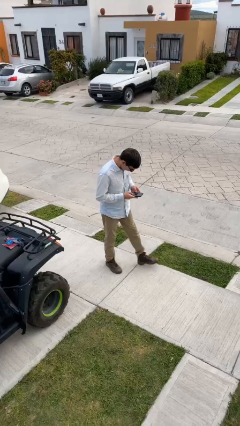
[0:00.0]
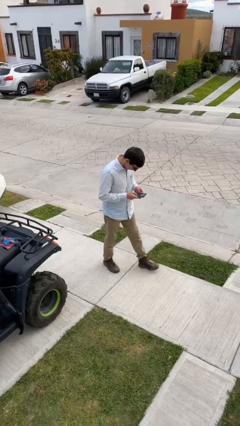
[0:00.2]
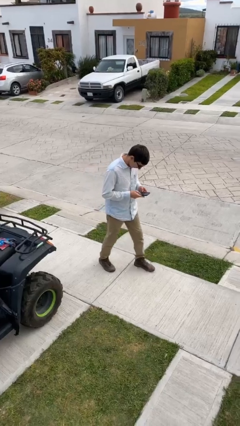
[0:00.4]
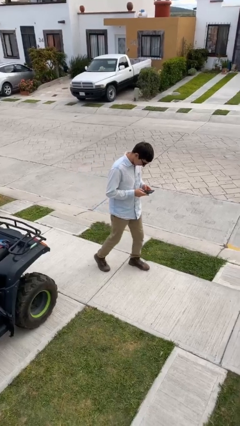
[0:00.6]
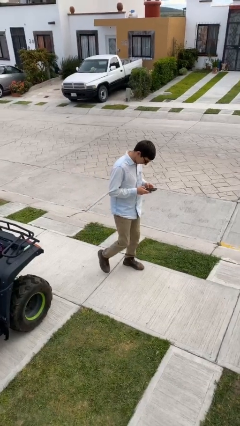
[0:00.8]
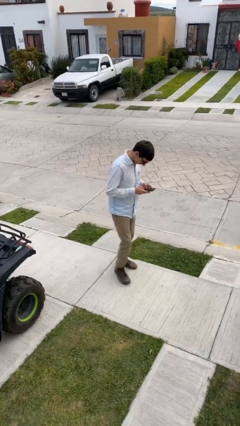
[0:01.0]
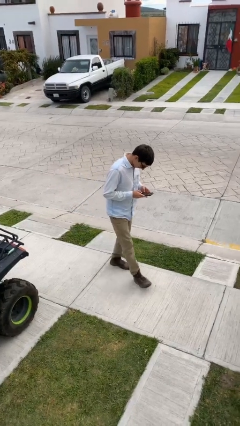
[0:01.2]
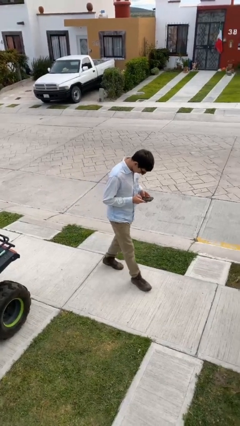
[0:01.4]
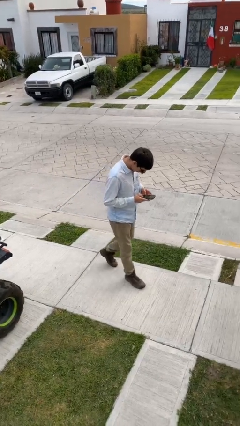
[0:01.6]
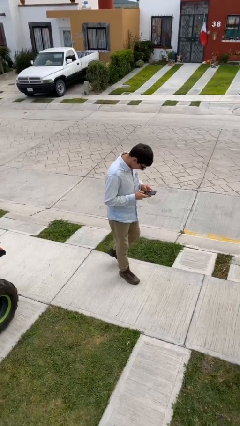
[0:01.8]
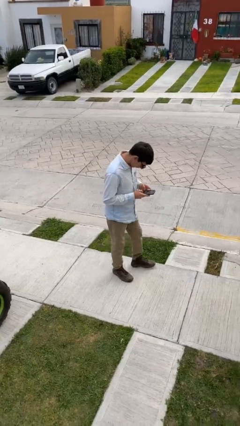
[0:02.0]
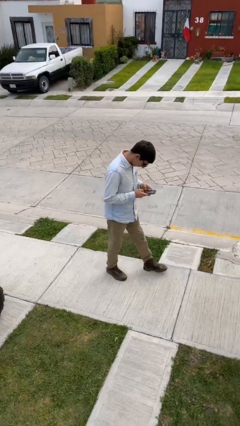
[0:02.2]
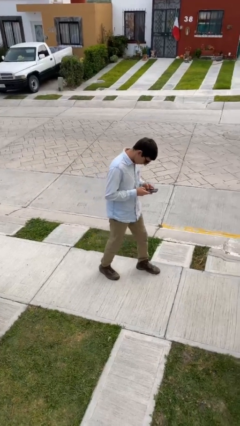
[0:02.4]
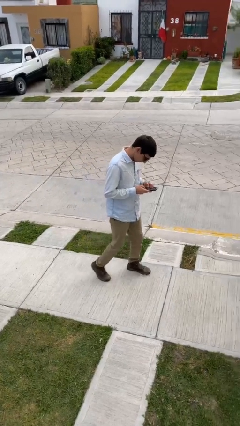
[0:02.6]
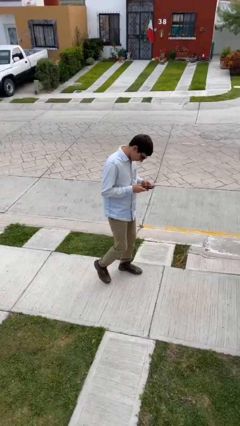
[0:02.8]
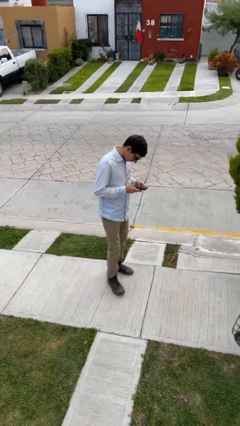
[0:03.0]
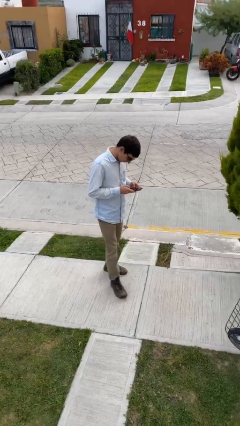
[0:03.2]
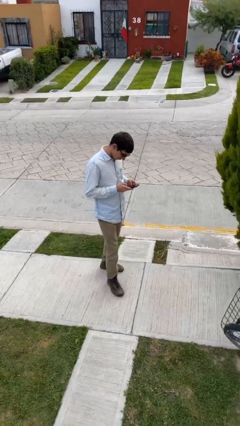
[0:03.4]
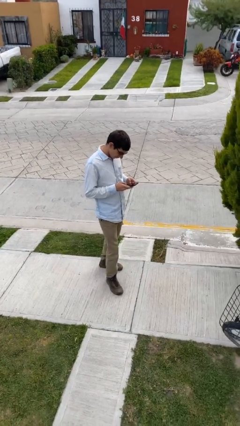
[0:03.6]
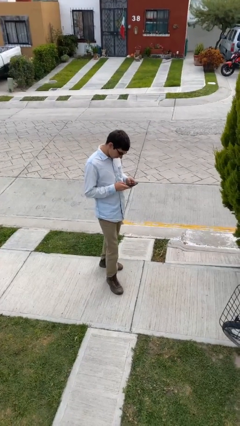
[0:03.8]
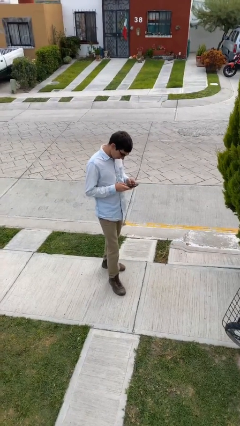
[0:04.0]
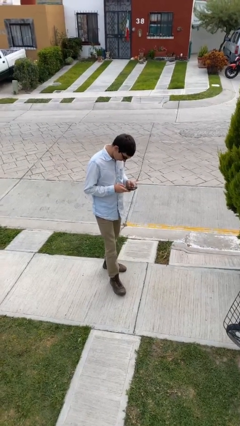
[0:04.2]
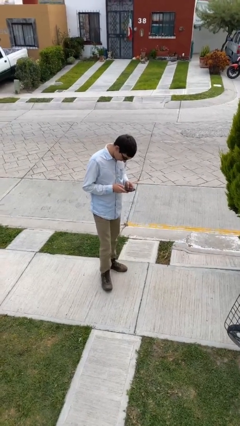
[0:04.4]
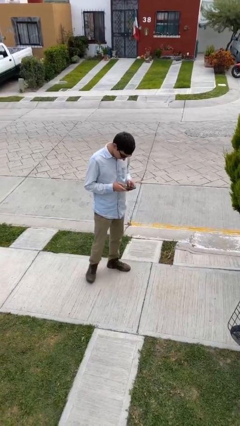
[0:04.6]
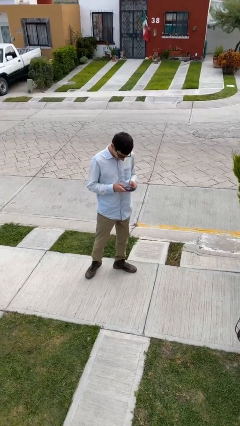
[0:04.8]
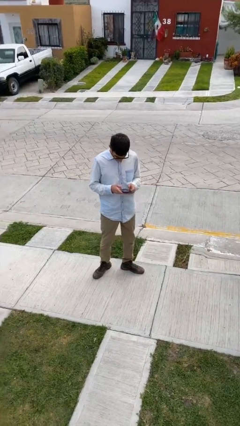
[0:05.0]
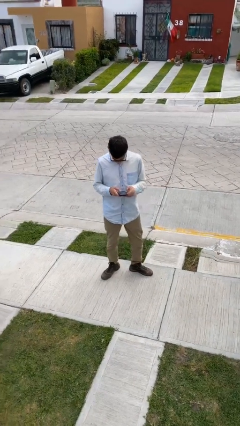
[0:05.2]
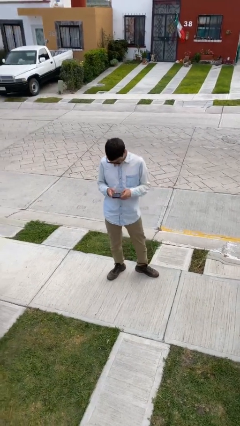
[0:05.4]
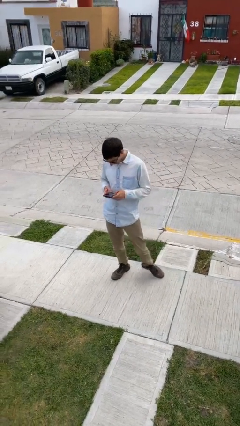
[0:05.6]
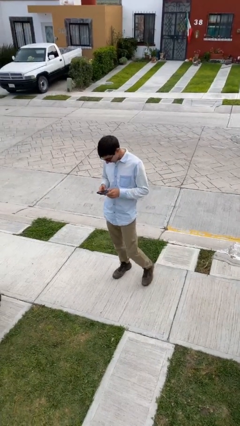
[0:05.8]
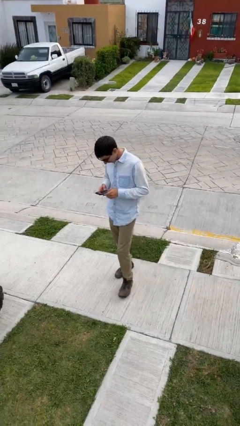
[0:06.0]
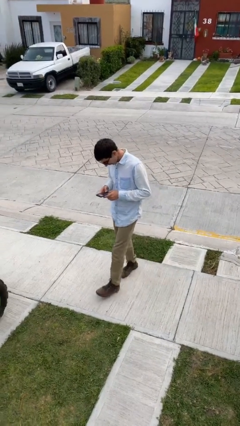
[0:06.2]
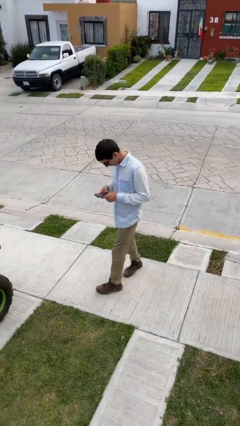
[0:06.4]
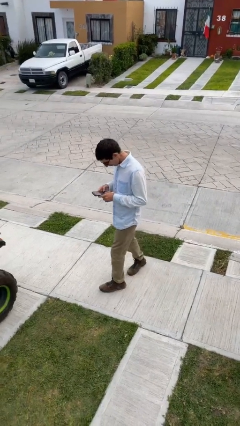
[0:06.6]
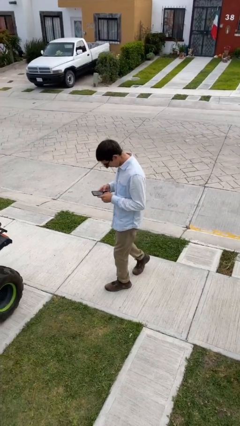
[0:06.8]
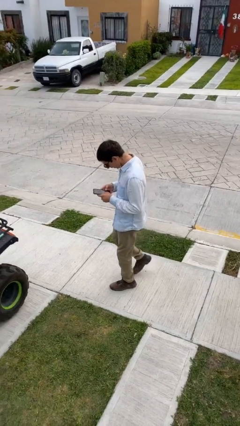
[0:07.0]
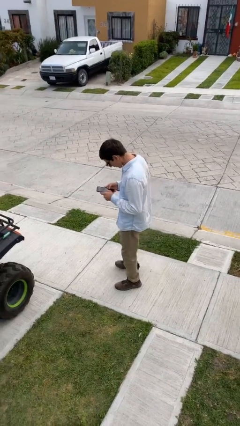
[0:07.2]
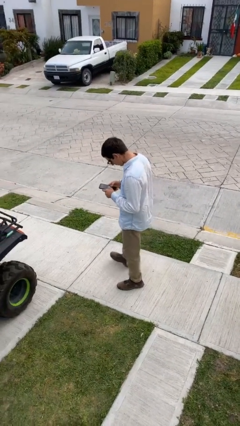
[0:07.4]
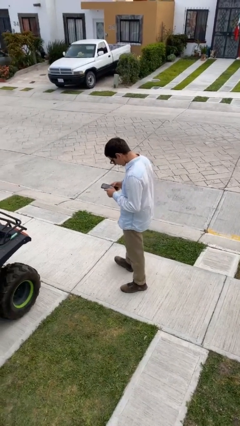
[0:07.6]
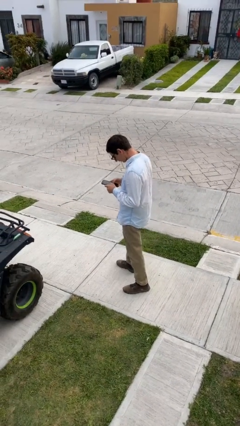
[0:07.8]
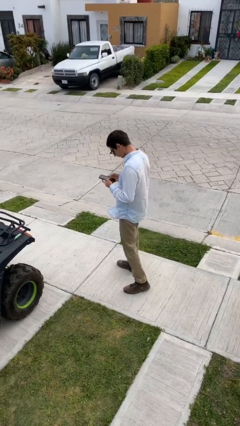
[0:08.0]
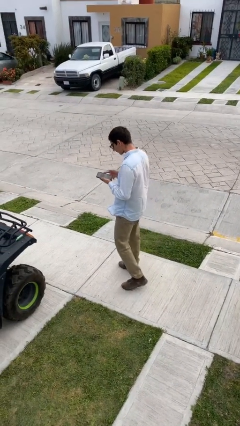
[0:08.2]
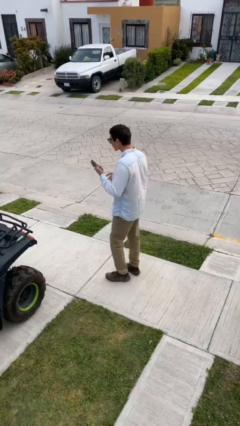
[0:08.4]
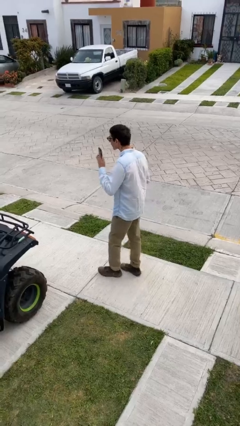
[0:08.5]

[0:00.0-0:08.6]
person texts on phone

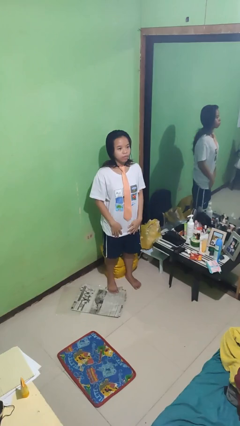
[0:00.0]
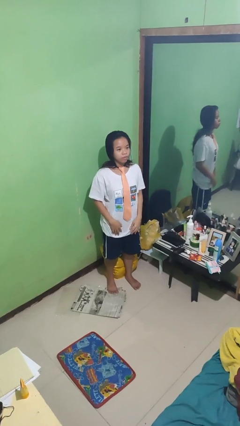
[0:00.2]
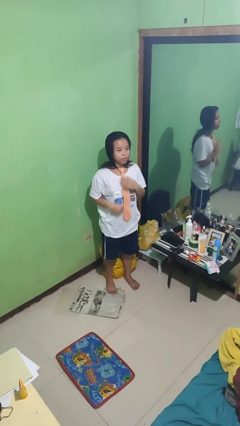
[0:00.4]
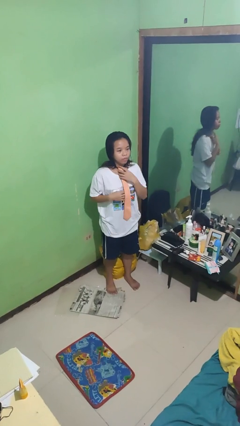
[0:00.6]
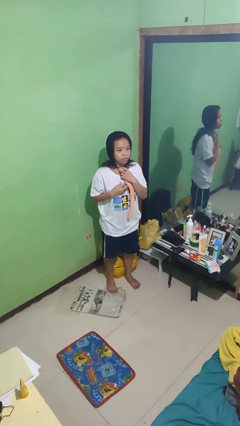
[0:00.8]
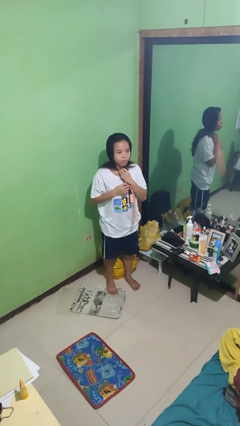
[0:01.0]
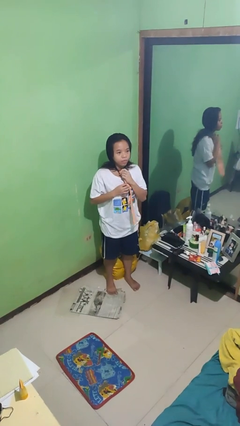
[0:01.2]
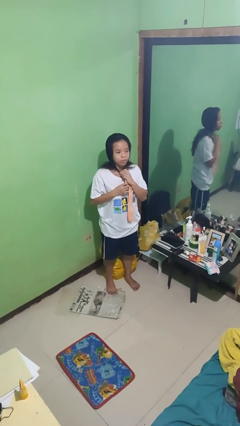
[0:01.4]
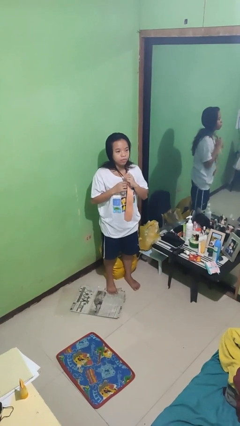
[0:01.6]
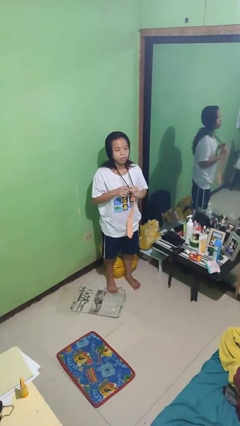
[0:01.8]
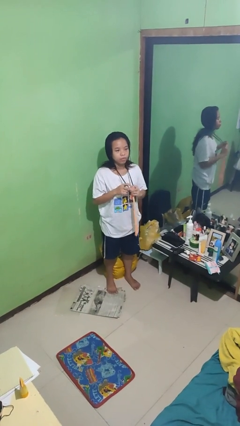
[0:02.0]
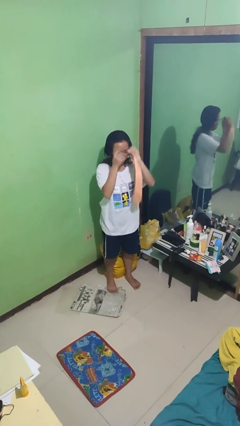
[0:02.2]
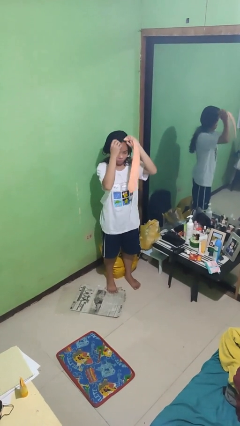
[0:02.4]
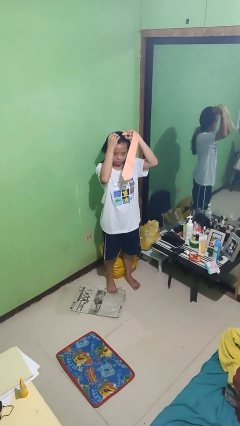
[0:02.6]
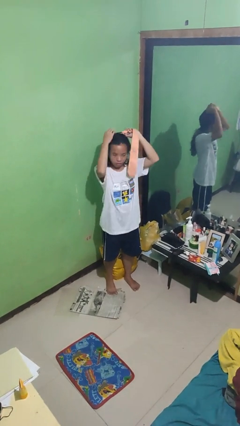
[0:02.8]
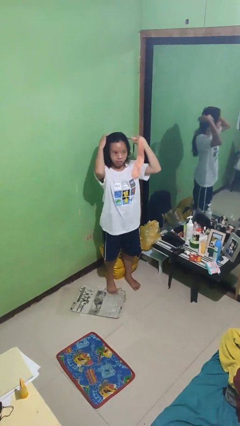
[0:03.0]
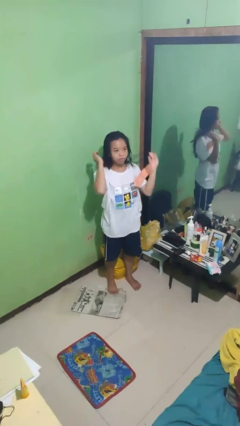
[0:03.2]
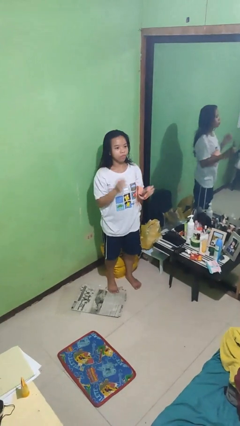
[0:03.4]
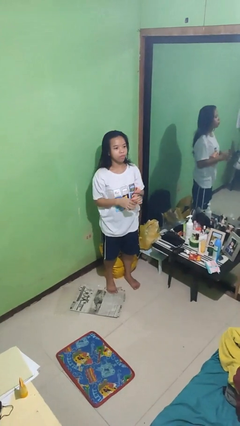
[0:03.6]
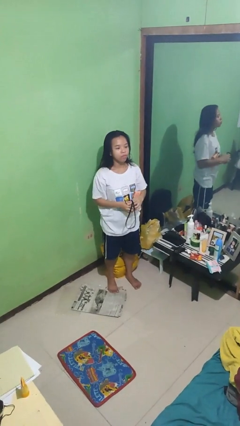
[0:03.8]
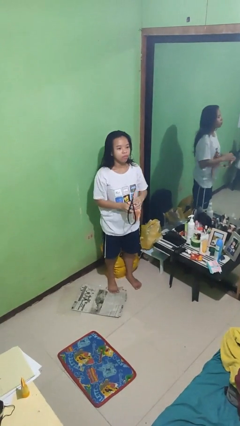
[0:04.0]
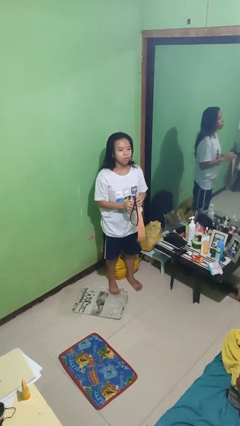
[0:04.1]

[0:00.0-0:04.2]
person takes off necktie

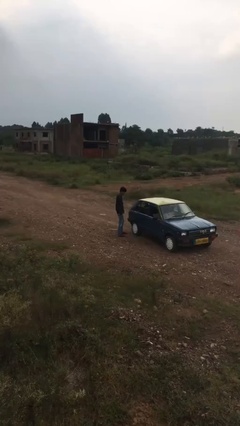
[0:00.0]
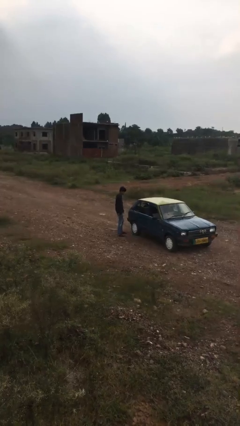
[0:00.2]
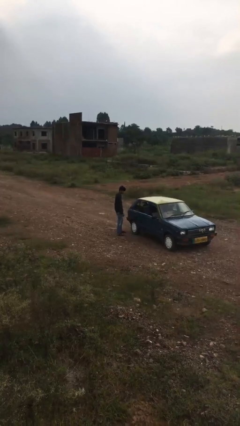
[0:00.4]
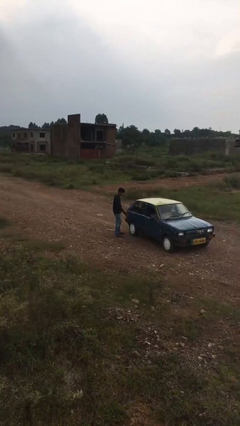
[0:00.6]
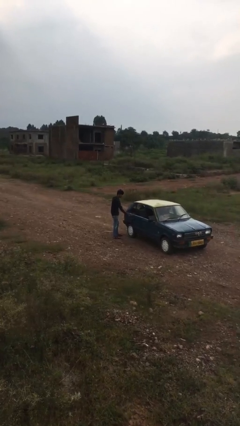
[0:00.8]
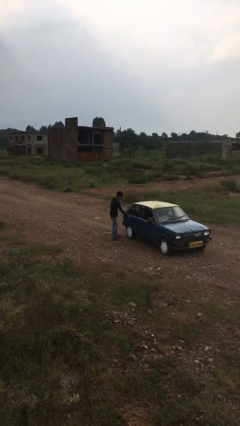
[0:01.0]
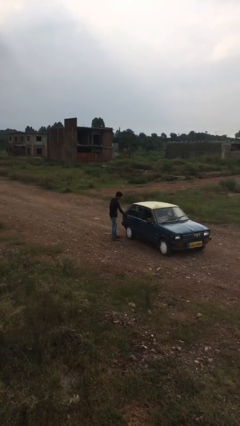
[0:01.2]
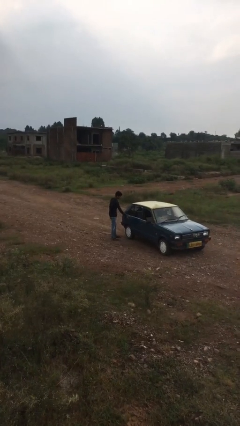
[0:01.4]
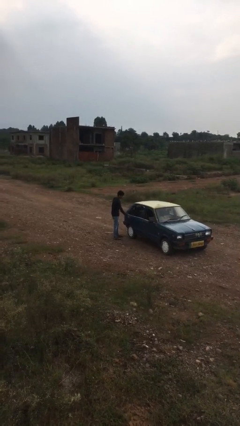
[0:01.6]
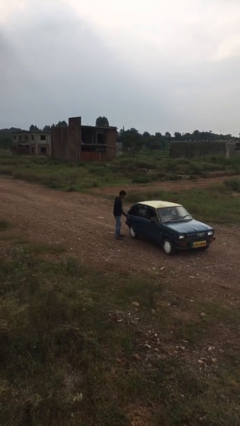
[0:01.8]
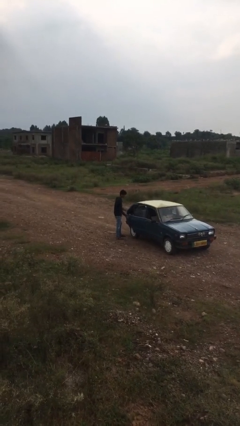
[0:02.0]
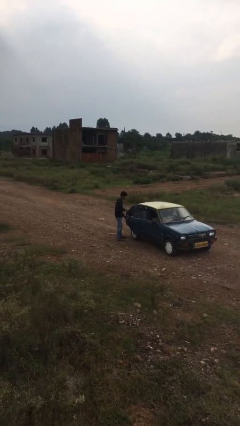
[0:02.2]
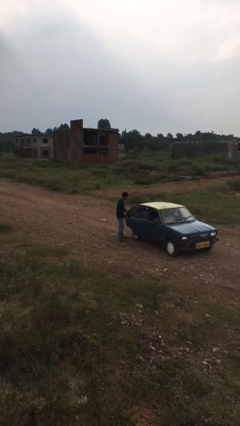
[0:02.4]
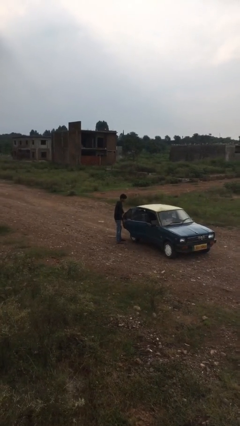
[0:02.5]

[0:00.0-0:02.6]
person opens car door

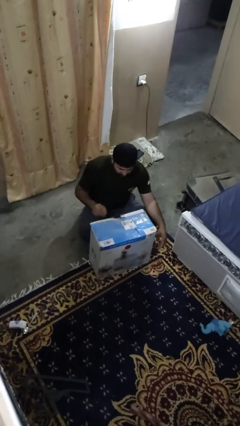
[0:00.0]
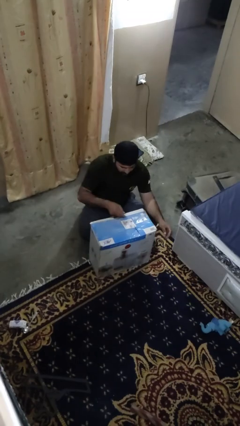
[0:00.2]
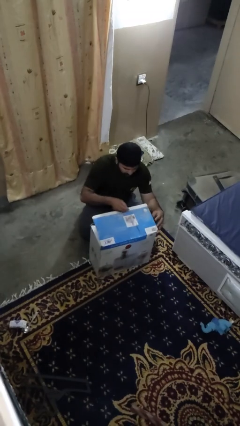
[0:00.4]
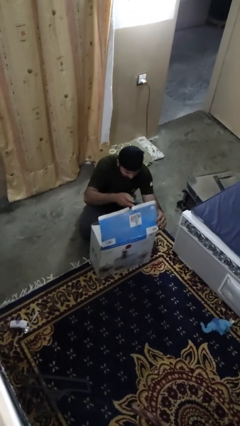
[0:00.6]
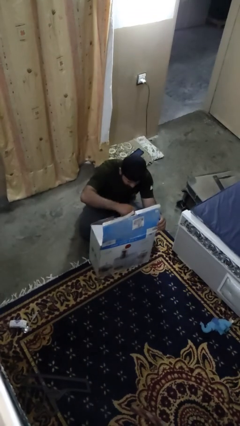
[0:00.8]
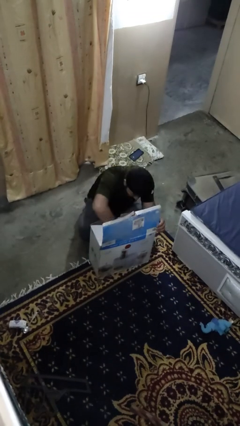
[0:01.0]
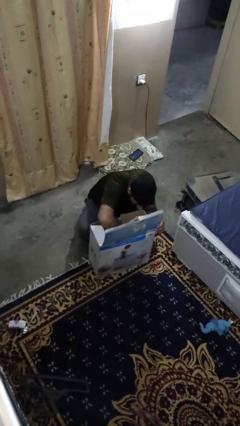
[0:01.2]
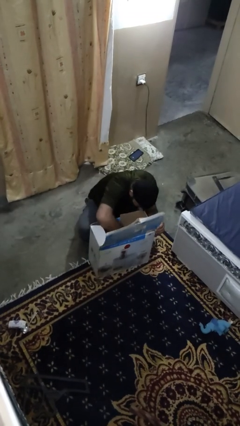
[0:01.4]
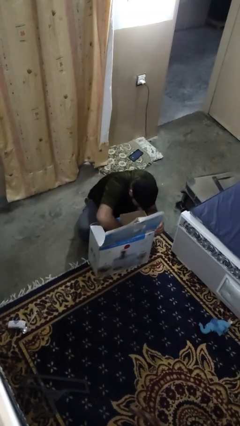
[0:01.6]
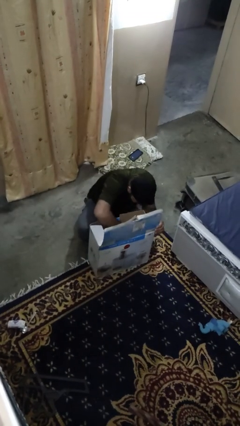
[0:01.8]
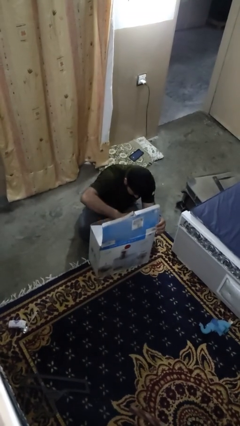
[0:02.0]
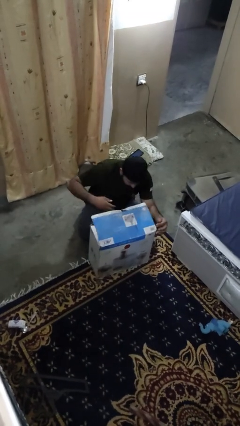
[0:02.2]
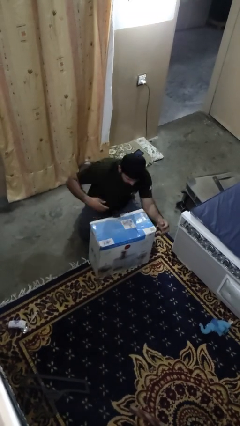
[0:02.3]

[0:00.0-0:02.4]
person searches in box

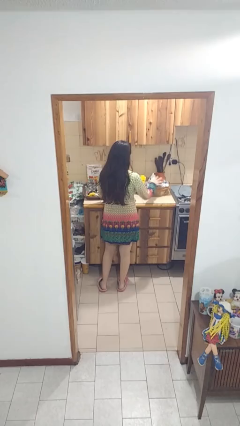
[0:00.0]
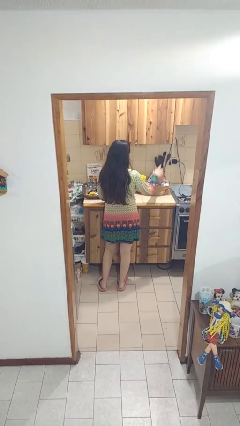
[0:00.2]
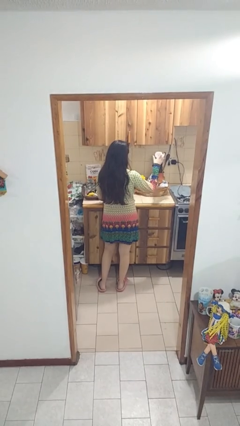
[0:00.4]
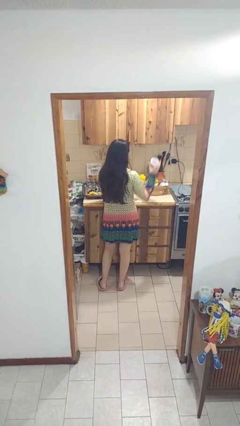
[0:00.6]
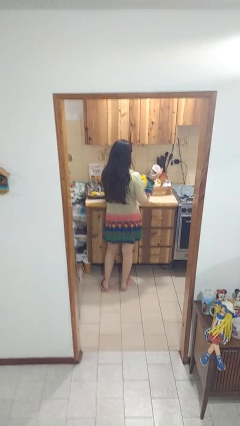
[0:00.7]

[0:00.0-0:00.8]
person takes object from bag
